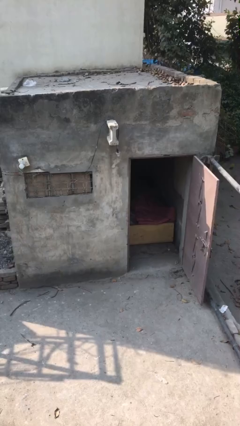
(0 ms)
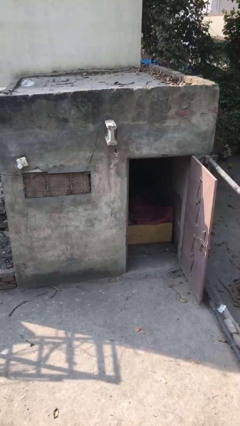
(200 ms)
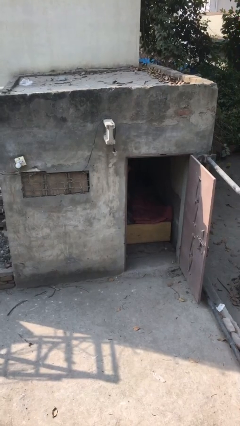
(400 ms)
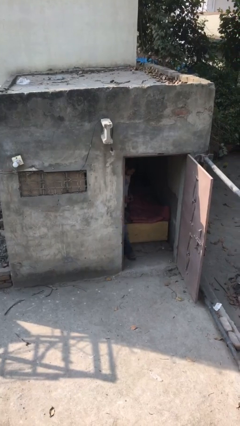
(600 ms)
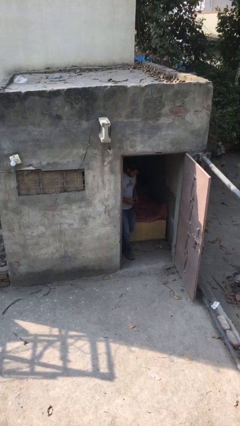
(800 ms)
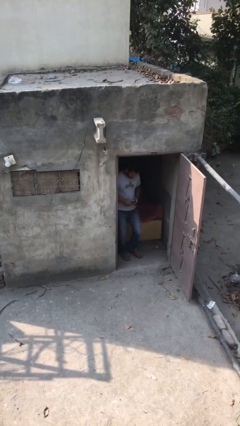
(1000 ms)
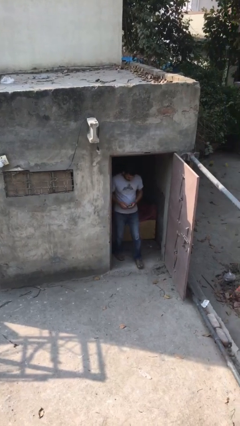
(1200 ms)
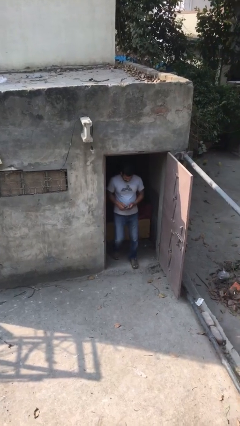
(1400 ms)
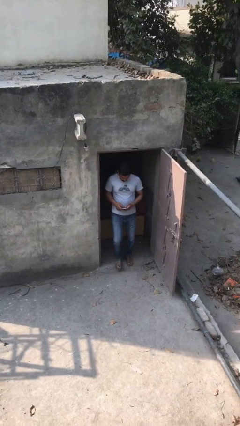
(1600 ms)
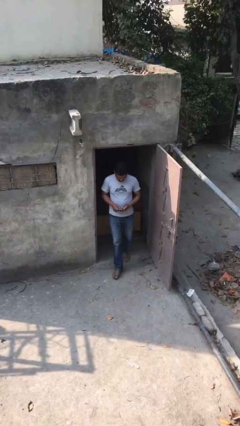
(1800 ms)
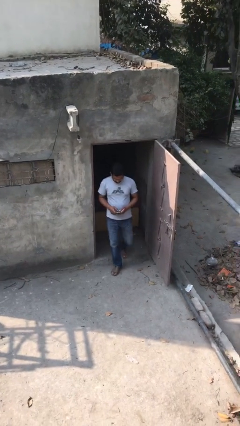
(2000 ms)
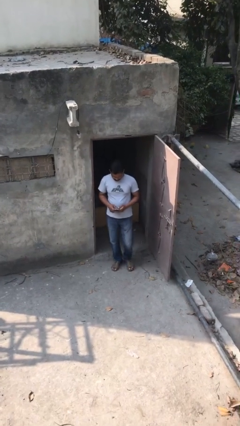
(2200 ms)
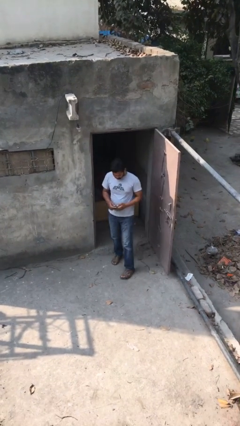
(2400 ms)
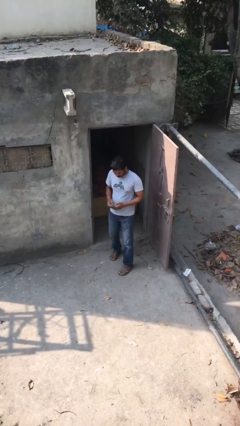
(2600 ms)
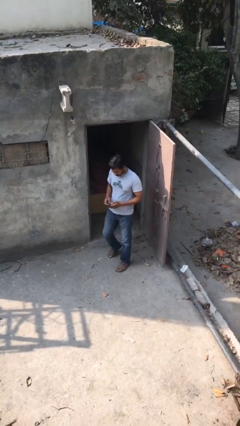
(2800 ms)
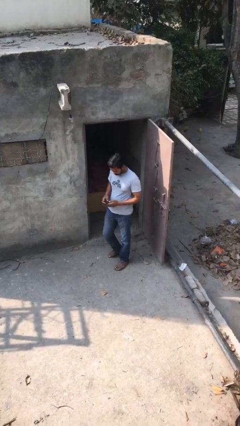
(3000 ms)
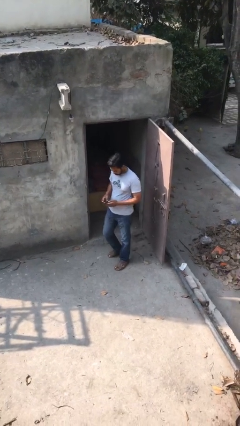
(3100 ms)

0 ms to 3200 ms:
person enters scene through structure

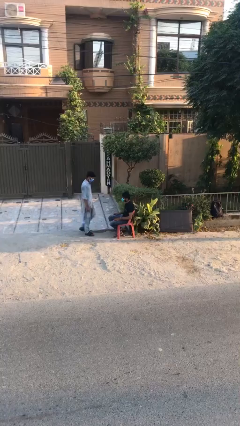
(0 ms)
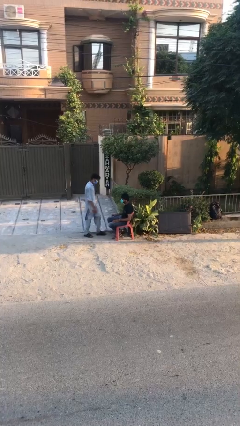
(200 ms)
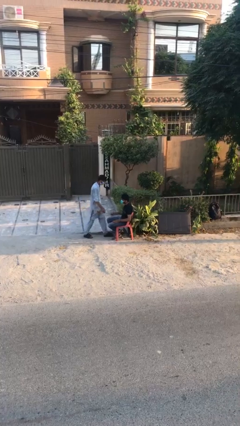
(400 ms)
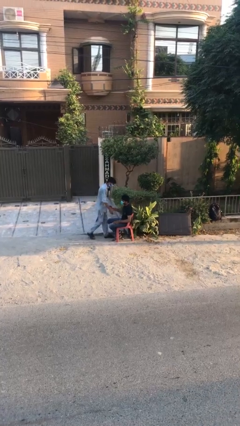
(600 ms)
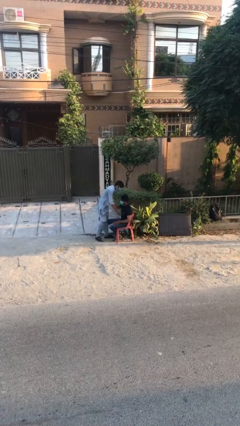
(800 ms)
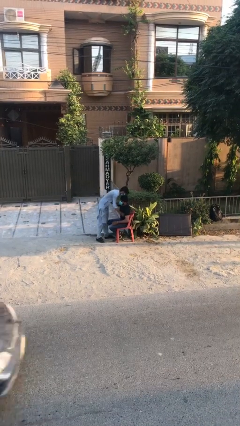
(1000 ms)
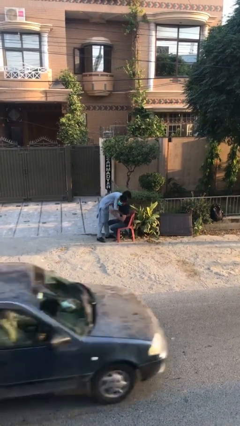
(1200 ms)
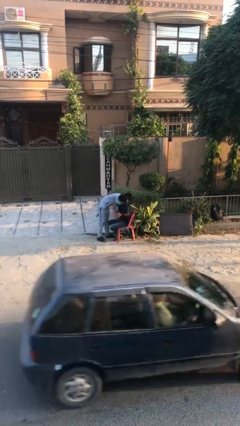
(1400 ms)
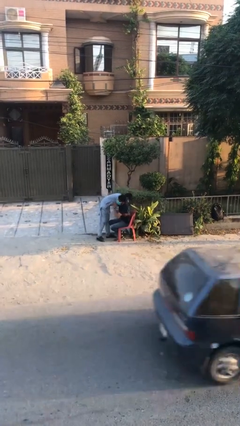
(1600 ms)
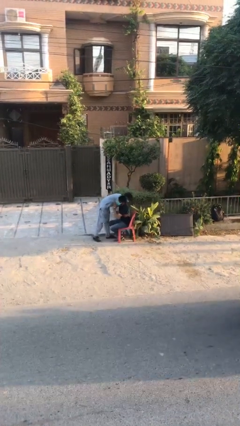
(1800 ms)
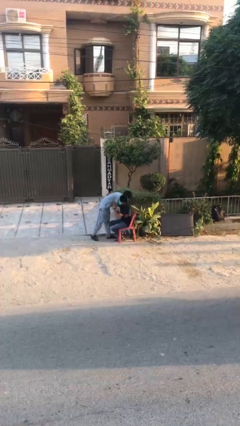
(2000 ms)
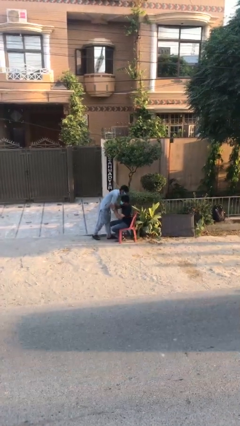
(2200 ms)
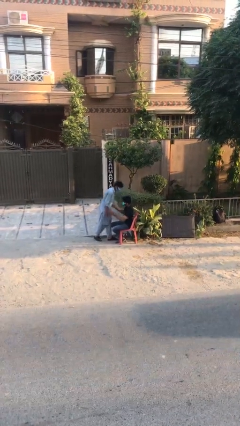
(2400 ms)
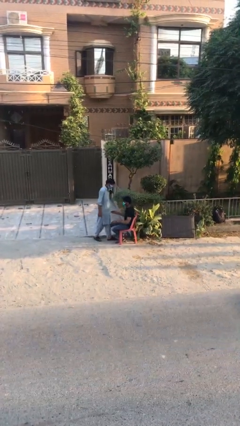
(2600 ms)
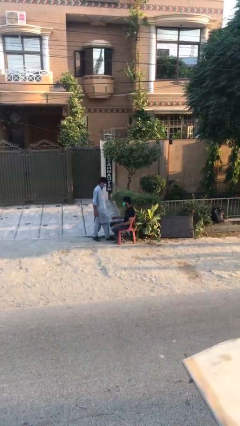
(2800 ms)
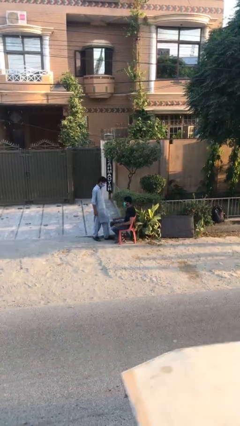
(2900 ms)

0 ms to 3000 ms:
person embraces person

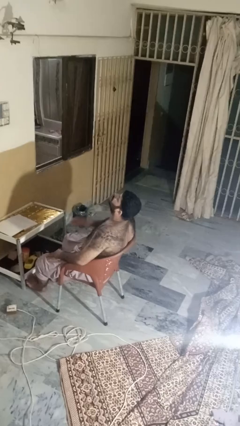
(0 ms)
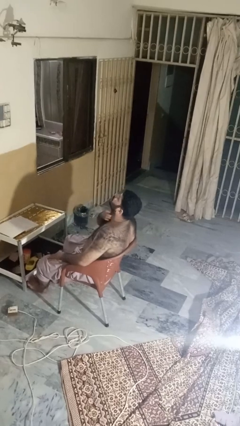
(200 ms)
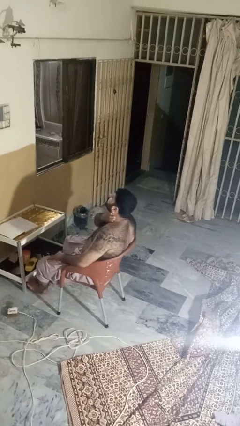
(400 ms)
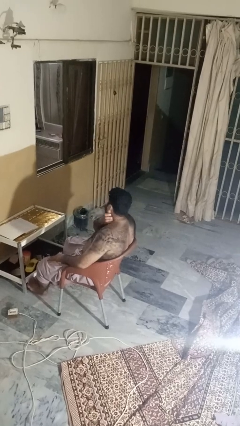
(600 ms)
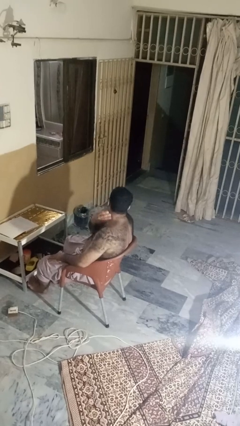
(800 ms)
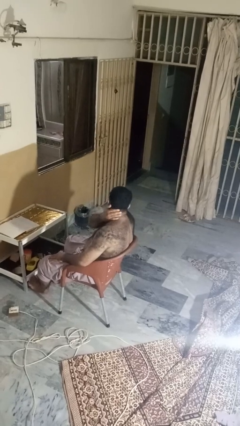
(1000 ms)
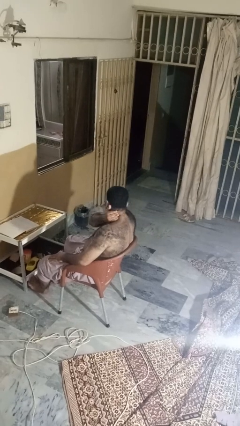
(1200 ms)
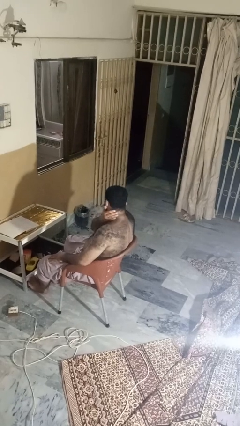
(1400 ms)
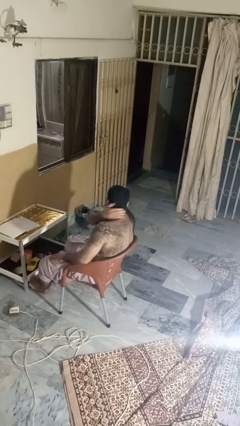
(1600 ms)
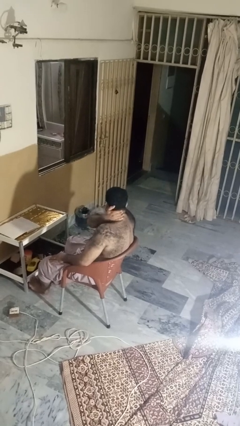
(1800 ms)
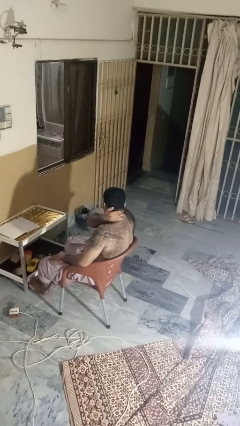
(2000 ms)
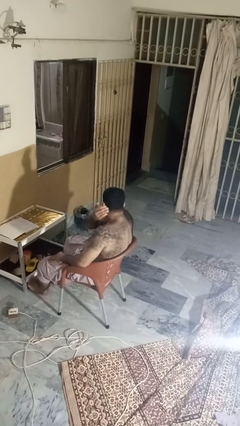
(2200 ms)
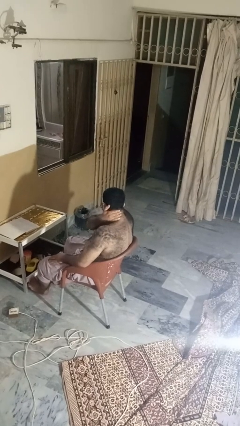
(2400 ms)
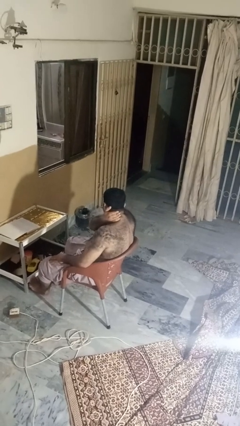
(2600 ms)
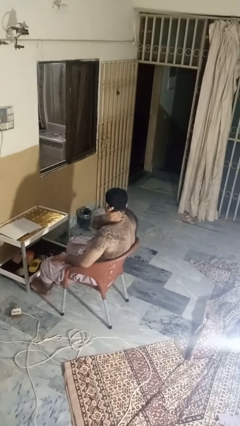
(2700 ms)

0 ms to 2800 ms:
person rubs neck

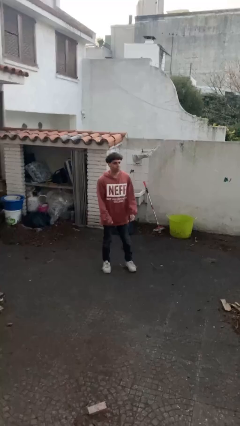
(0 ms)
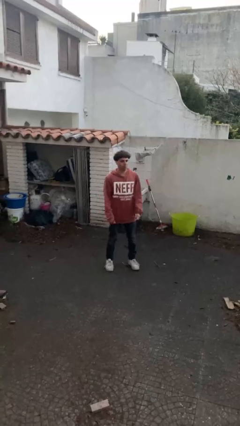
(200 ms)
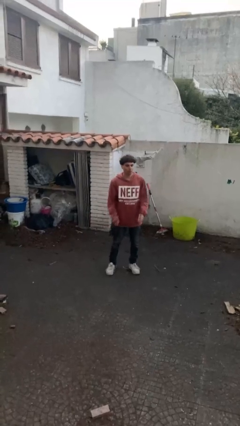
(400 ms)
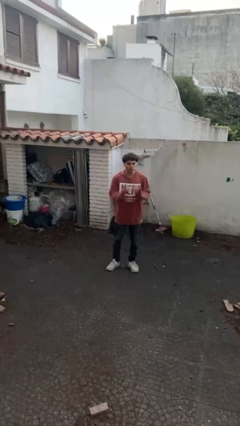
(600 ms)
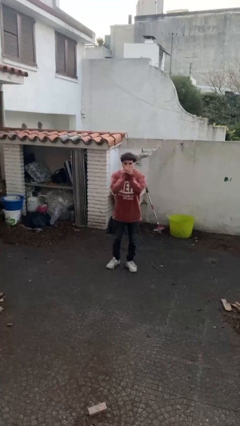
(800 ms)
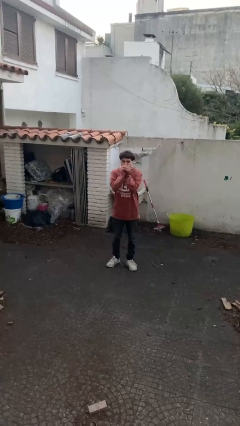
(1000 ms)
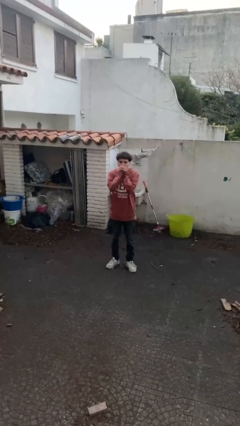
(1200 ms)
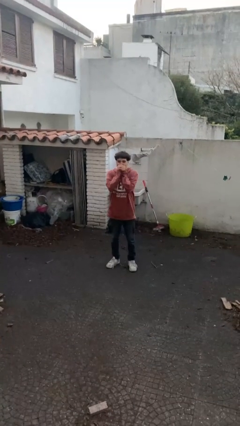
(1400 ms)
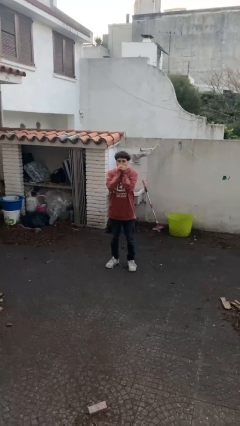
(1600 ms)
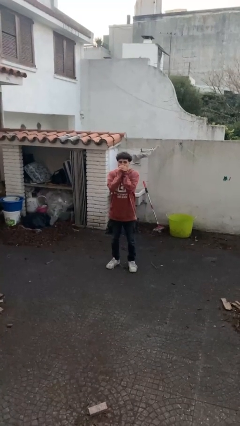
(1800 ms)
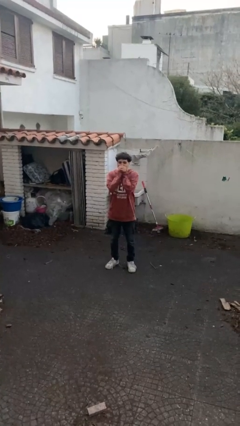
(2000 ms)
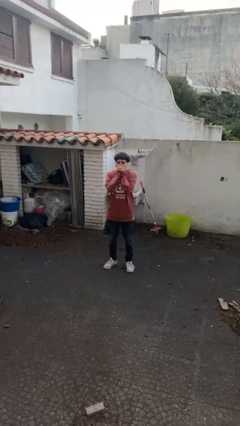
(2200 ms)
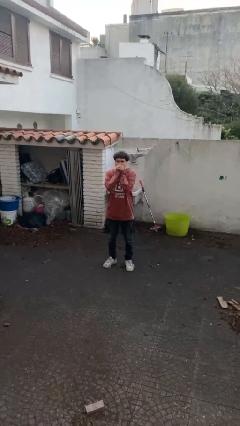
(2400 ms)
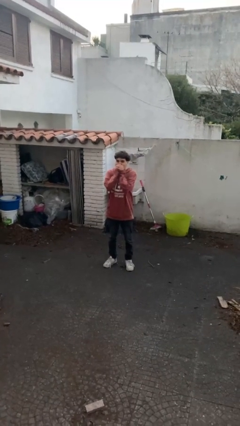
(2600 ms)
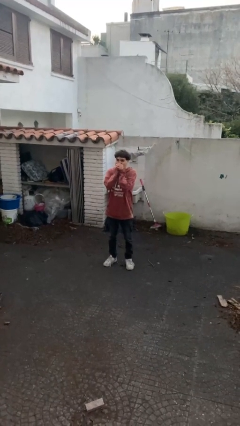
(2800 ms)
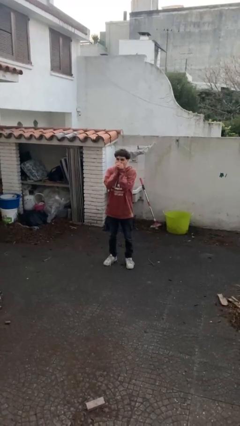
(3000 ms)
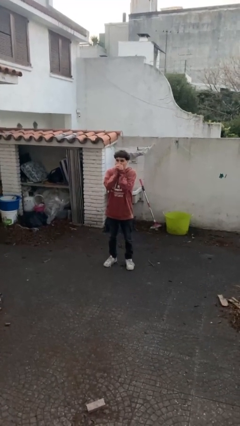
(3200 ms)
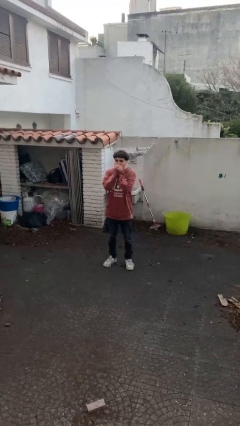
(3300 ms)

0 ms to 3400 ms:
person blows into hands

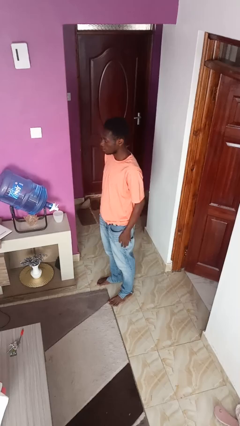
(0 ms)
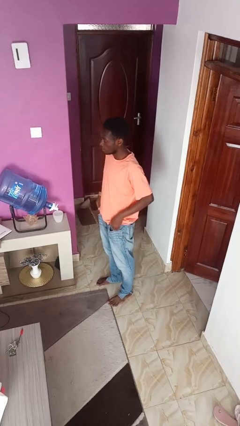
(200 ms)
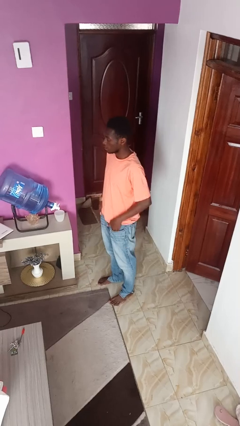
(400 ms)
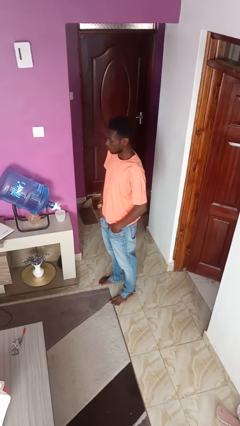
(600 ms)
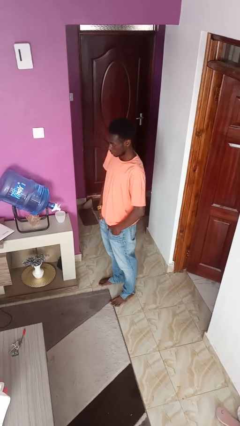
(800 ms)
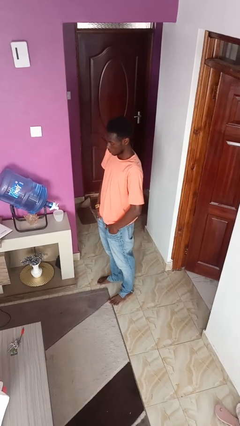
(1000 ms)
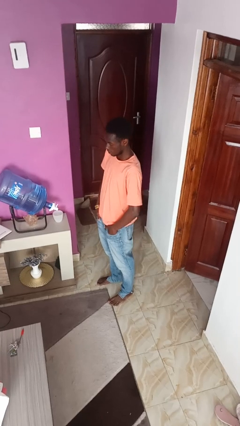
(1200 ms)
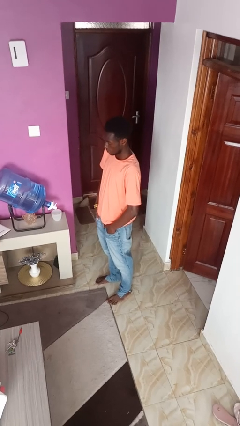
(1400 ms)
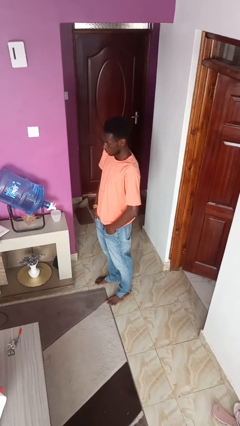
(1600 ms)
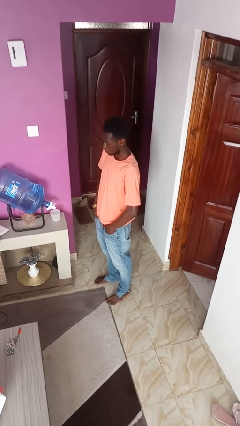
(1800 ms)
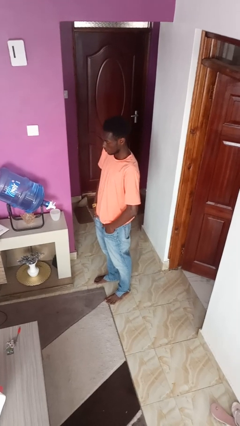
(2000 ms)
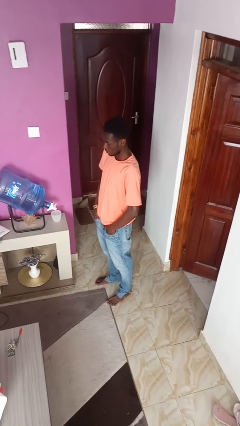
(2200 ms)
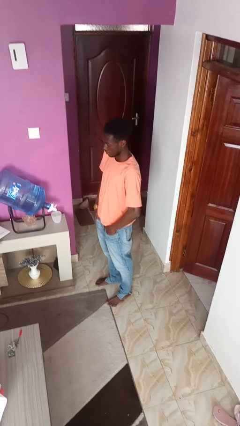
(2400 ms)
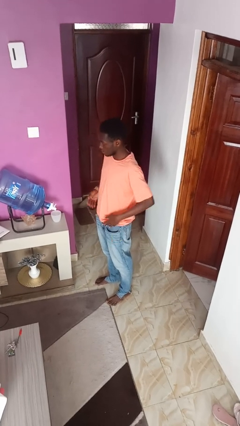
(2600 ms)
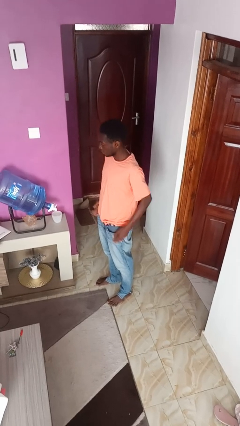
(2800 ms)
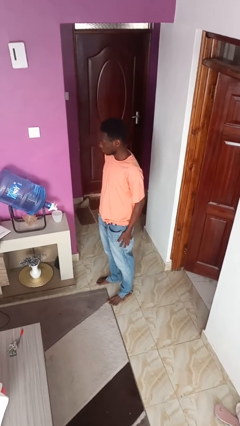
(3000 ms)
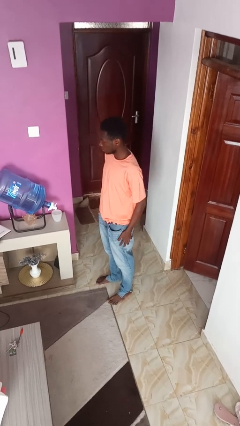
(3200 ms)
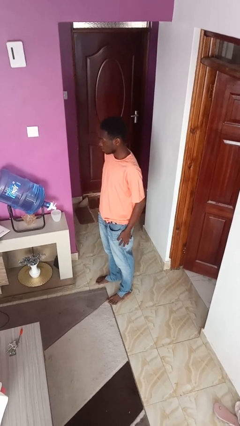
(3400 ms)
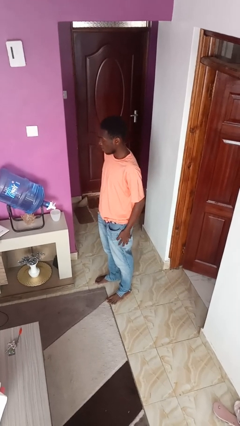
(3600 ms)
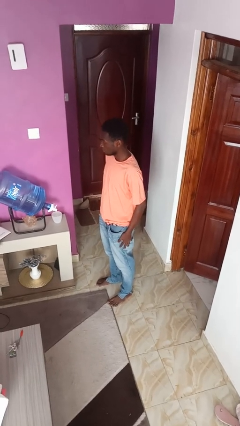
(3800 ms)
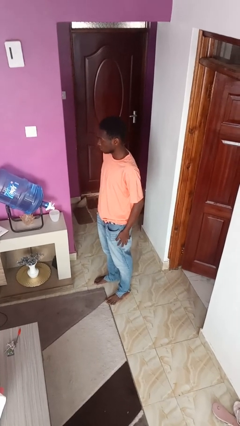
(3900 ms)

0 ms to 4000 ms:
person puts hands in back pockets

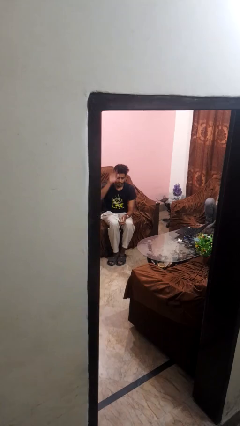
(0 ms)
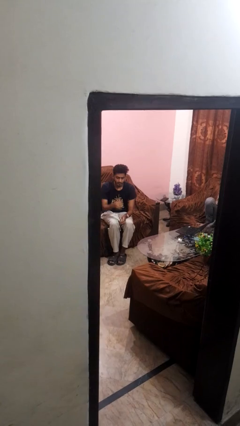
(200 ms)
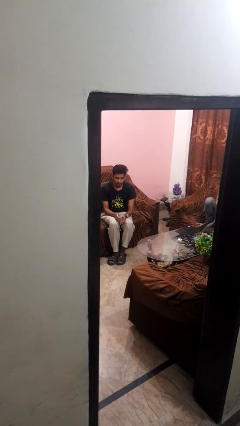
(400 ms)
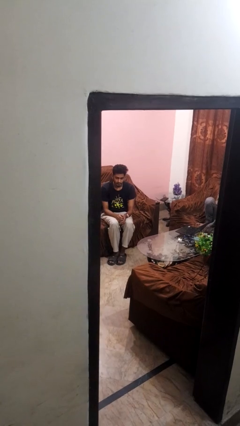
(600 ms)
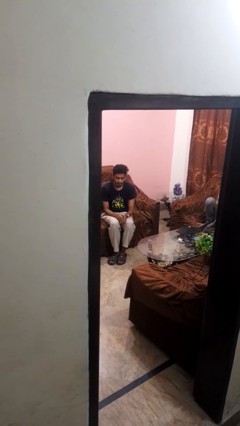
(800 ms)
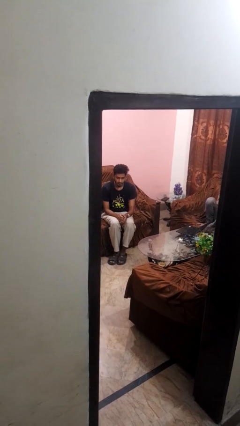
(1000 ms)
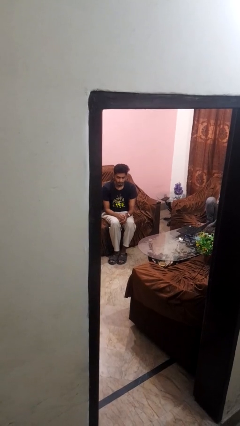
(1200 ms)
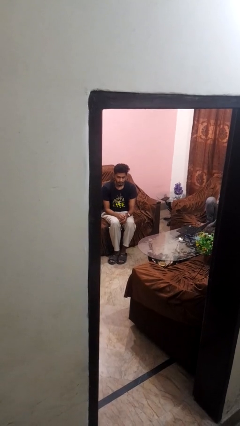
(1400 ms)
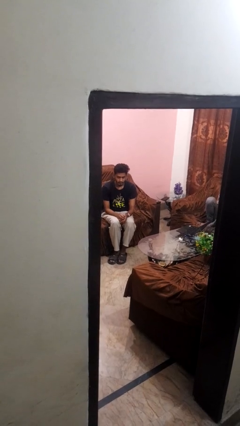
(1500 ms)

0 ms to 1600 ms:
person gestures lower hand
